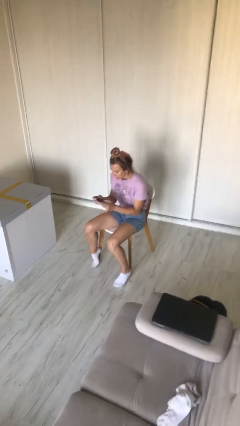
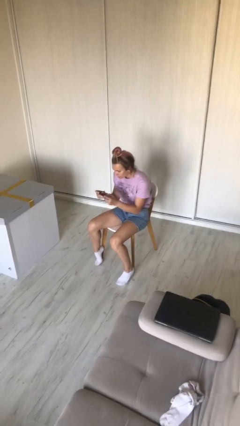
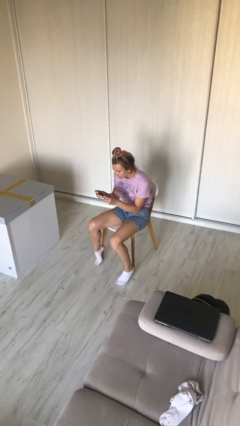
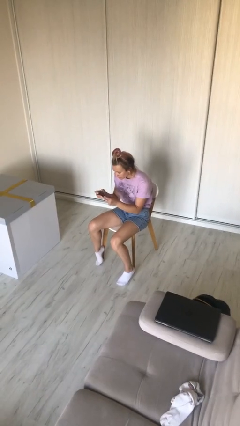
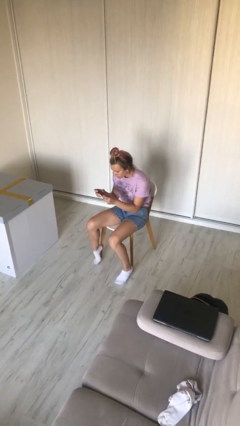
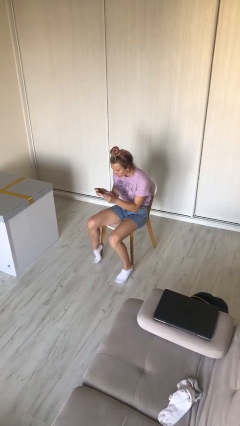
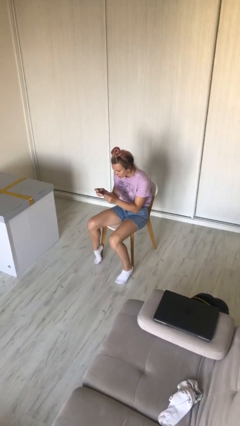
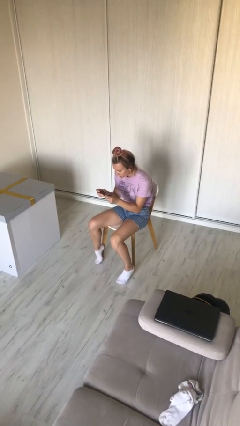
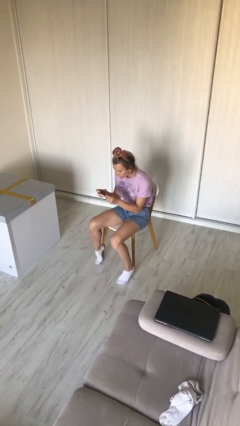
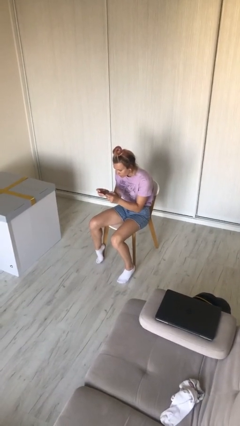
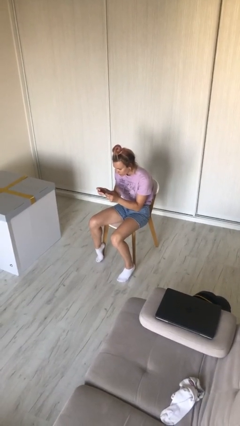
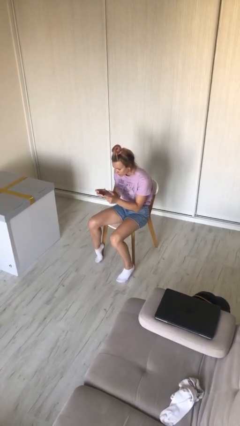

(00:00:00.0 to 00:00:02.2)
person interacts with handheld game

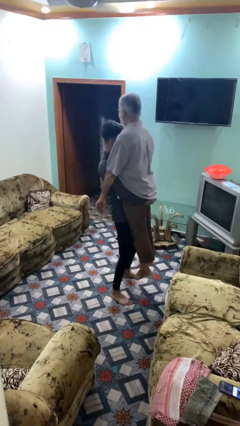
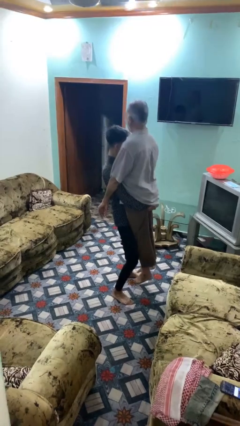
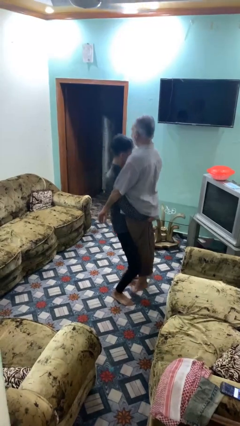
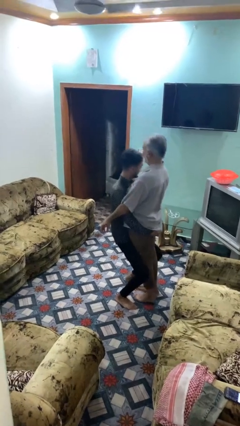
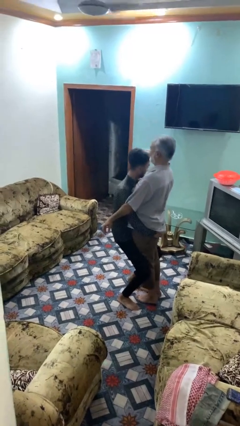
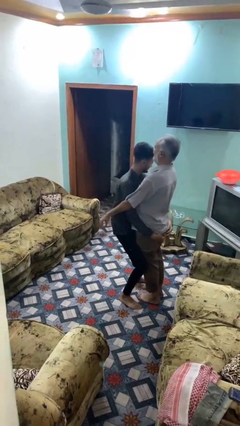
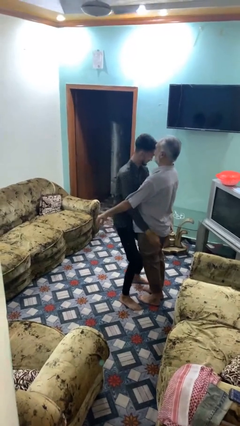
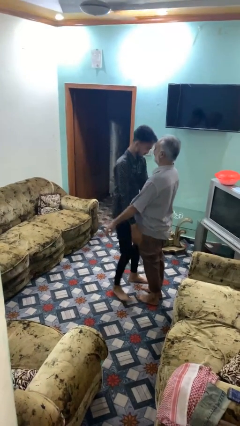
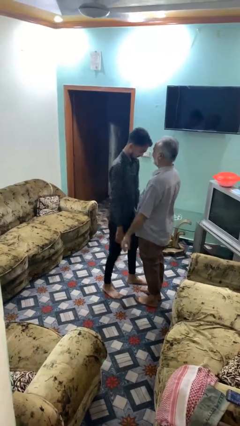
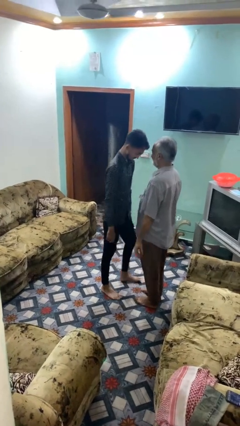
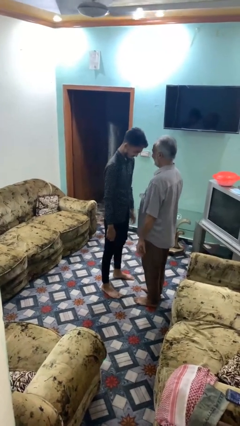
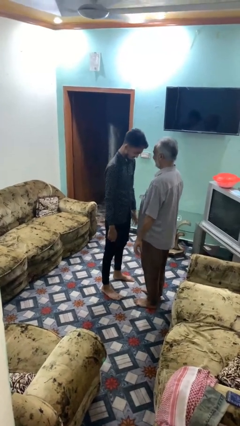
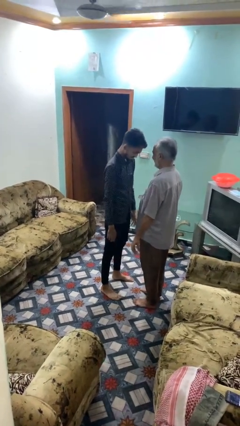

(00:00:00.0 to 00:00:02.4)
person puts down person

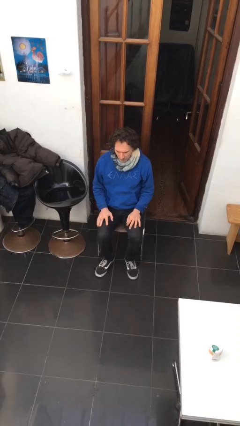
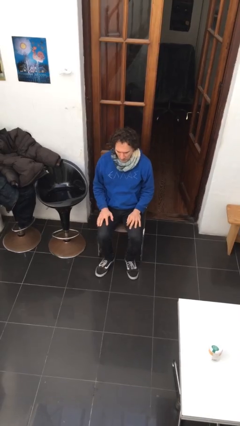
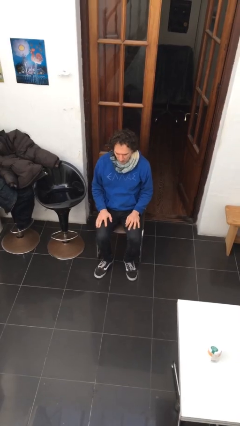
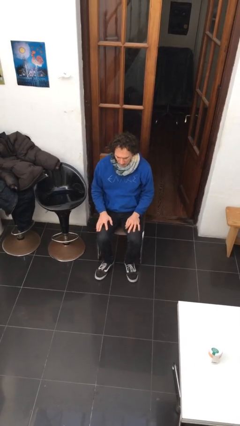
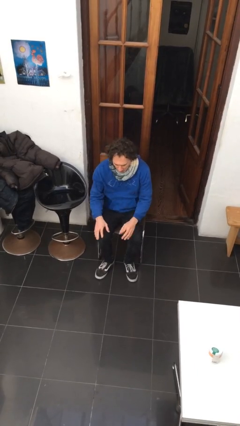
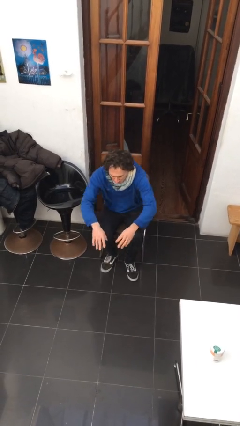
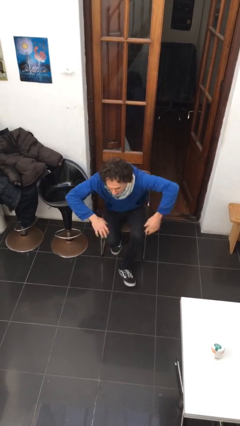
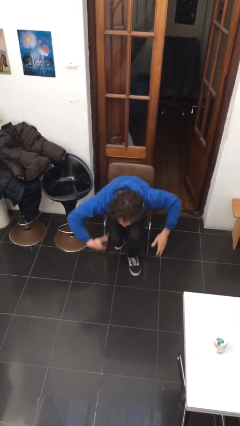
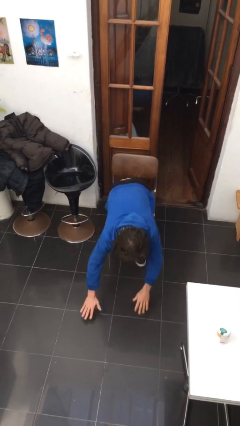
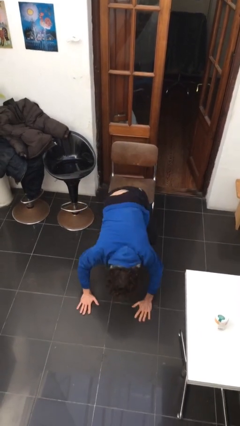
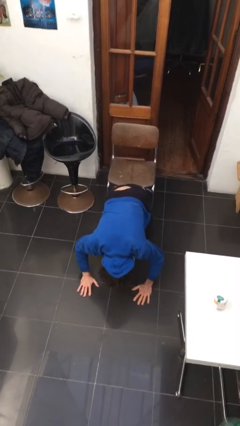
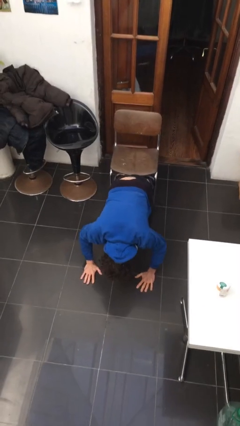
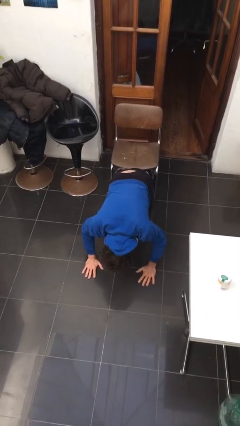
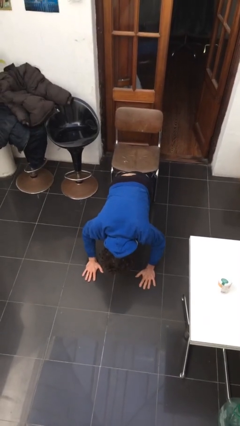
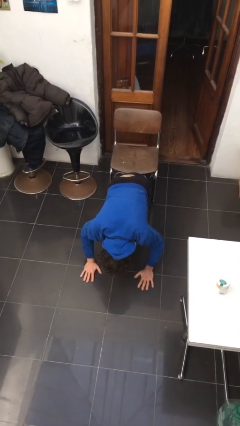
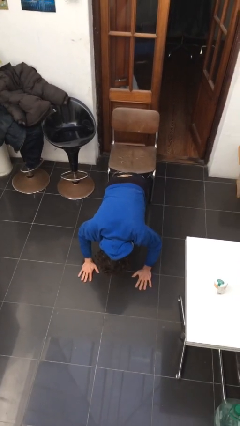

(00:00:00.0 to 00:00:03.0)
person falls from chair

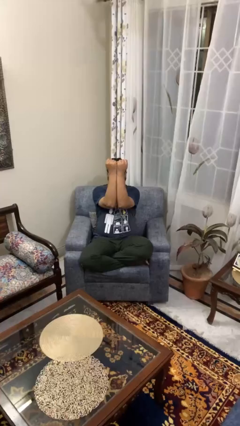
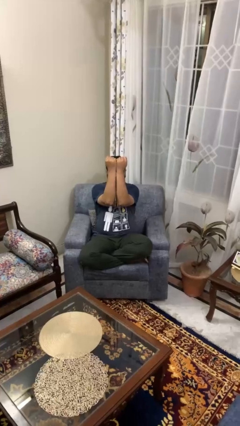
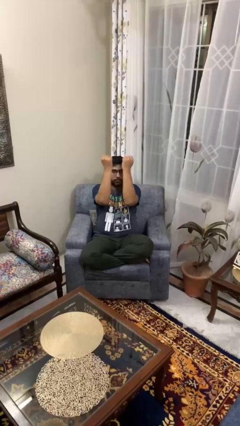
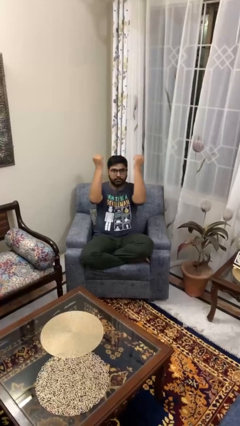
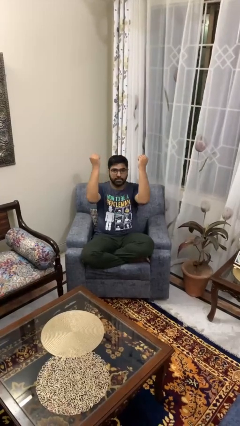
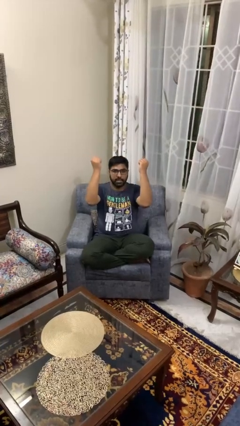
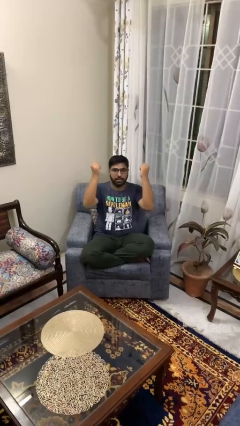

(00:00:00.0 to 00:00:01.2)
person gestures zoom out

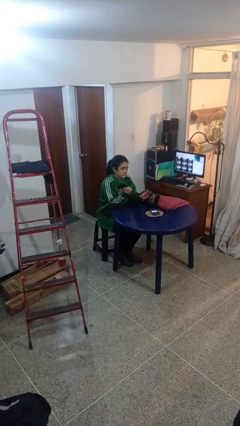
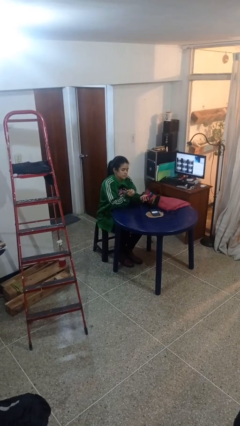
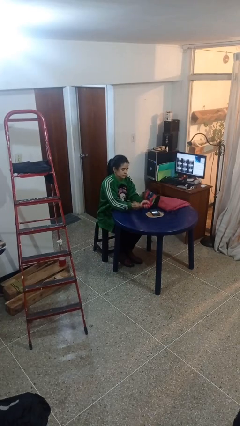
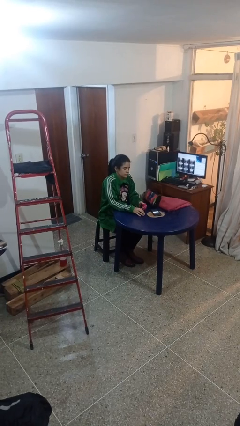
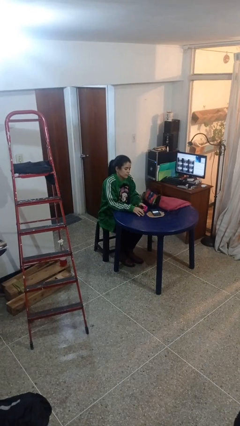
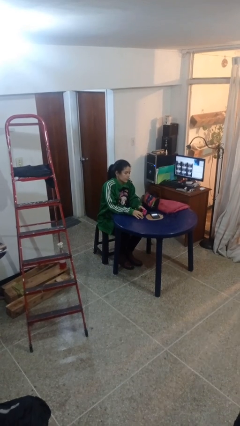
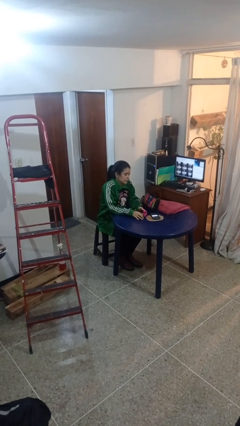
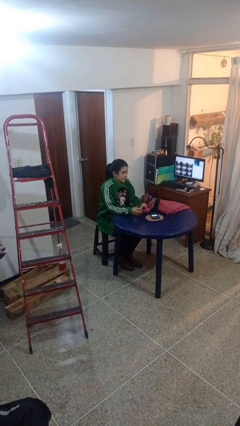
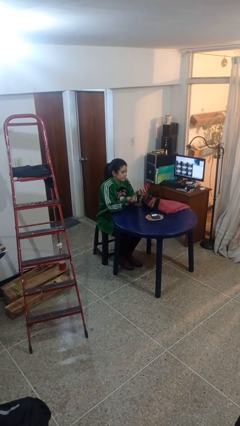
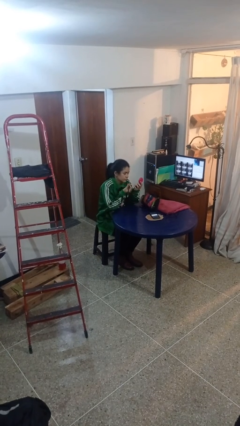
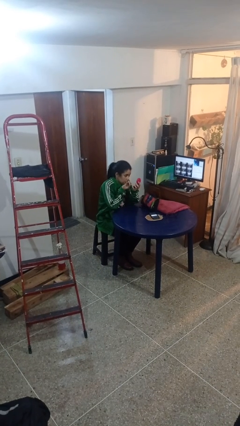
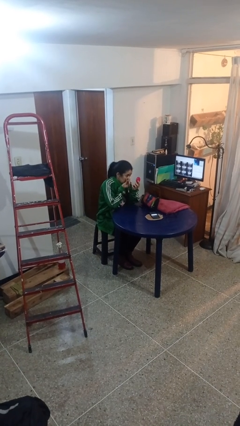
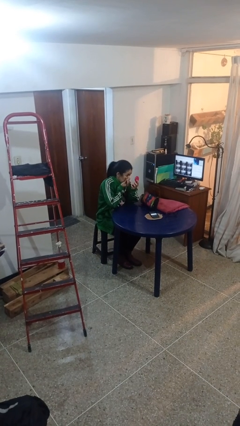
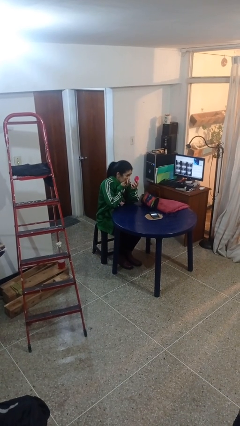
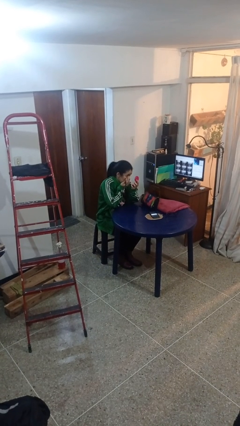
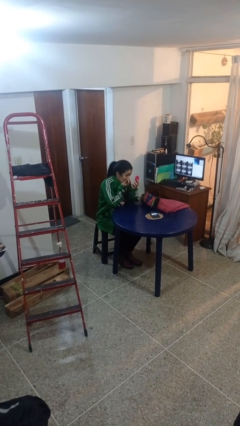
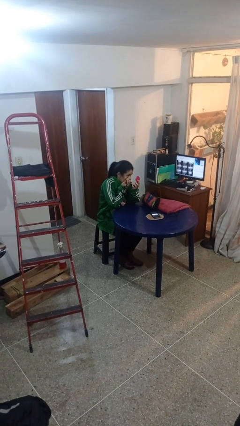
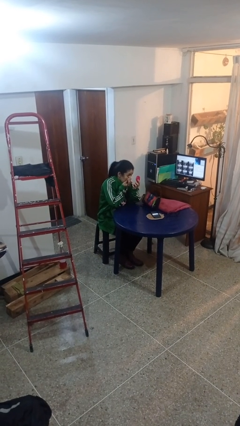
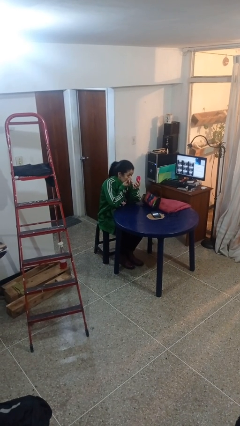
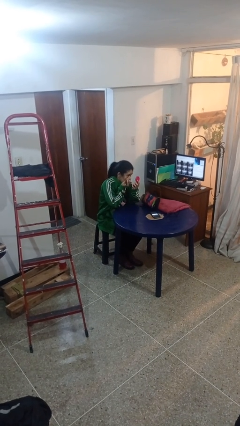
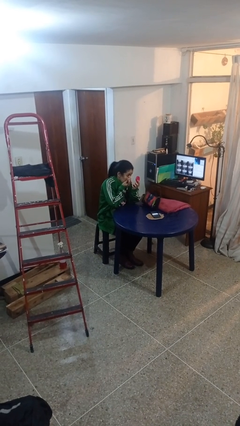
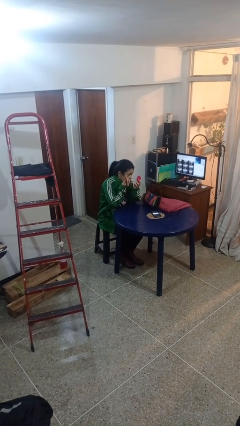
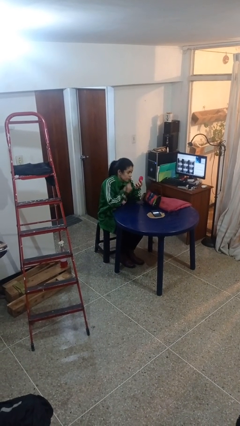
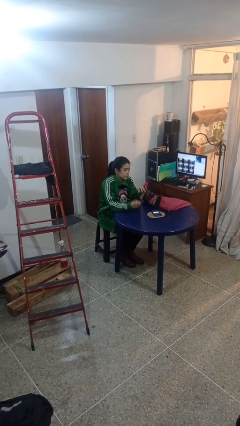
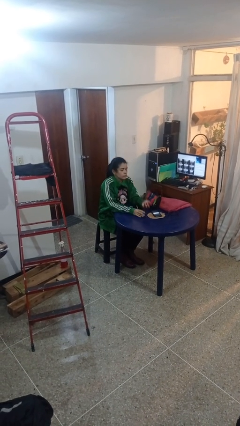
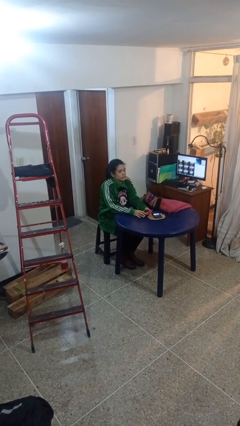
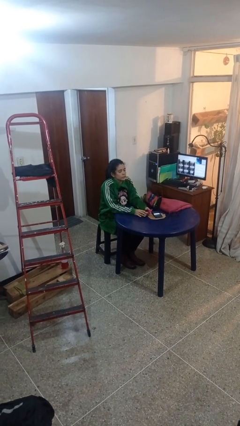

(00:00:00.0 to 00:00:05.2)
person applies eye makeup

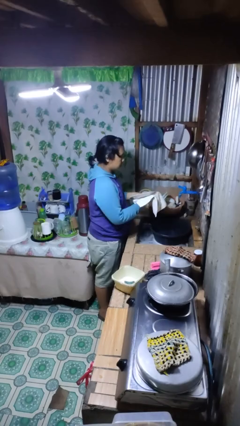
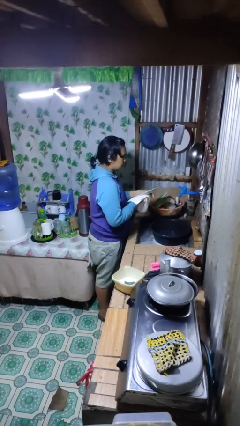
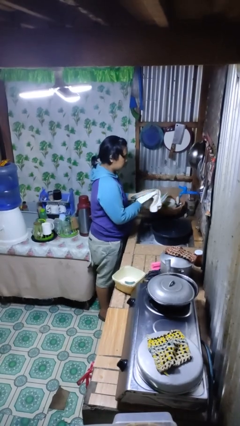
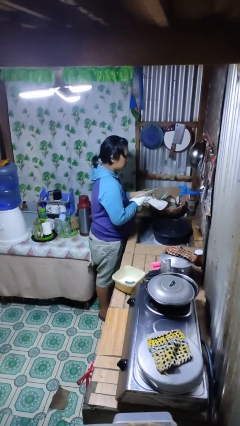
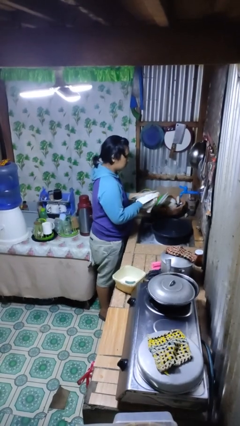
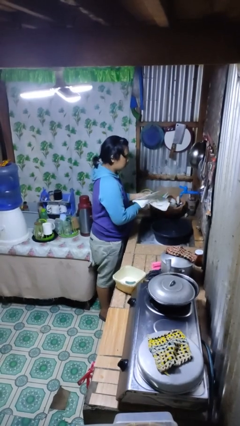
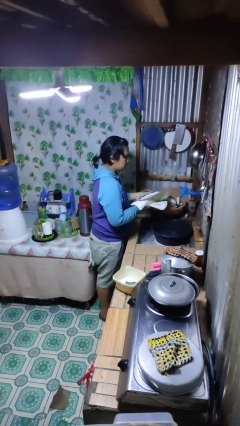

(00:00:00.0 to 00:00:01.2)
person dries dish

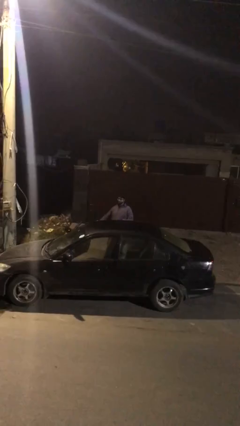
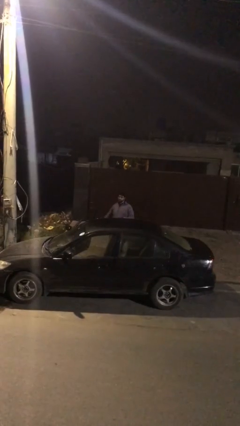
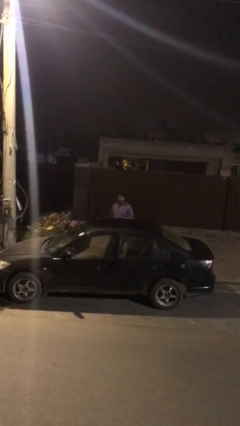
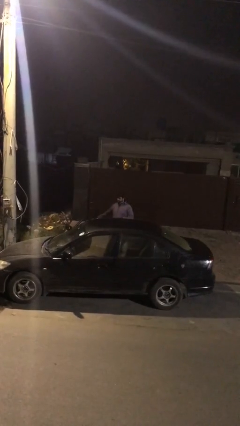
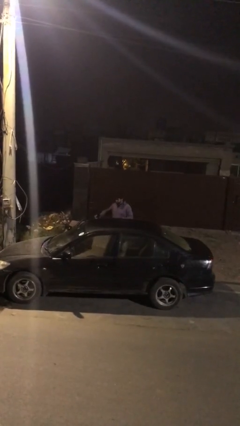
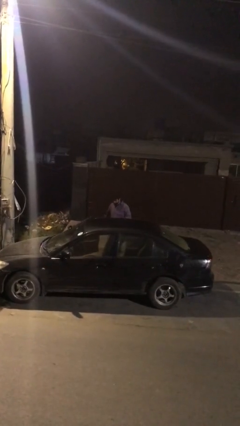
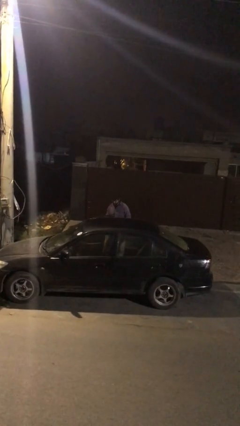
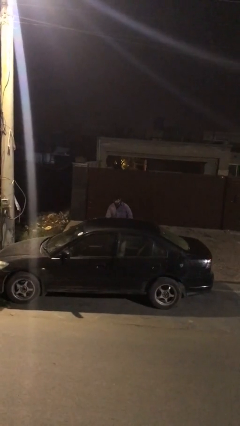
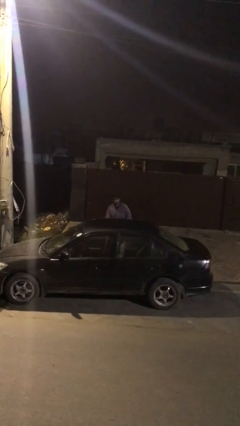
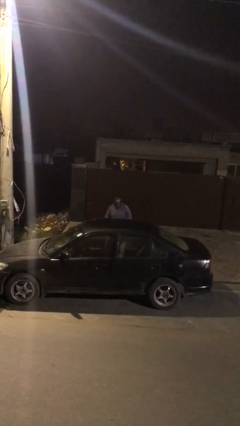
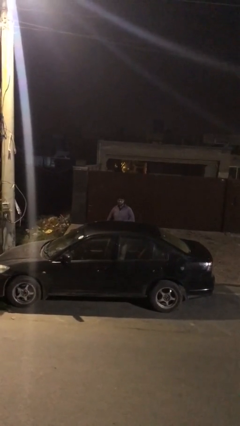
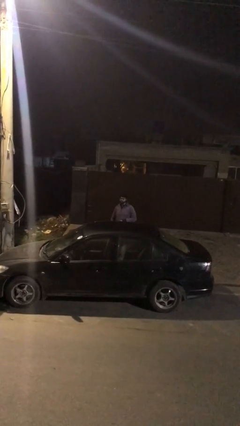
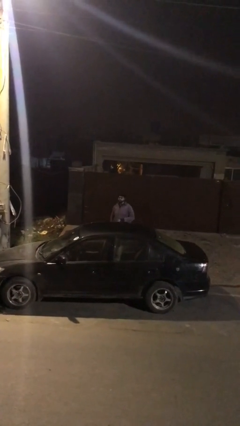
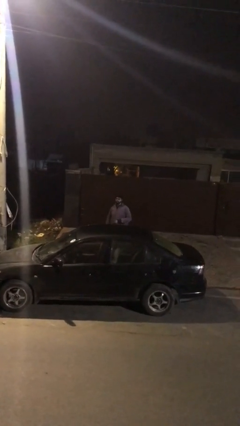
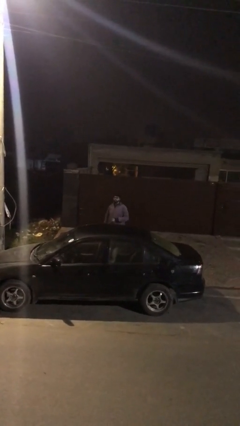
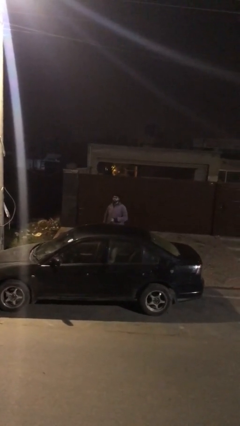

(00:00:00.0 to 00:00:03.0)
person closes car door
